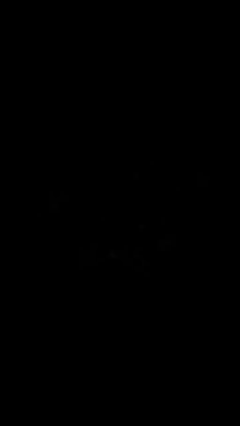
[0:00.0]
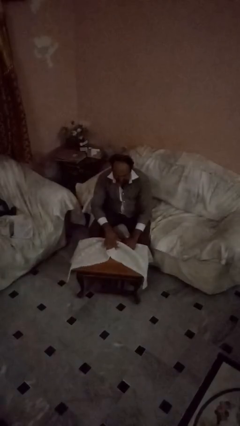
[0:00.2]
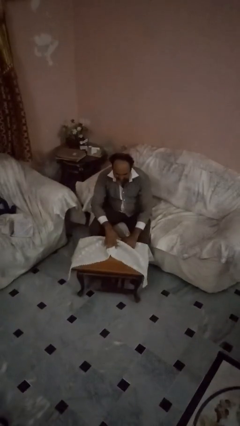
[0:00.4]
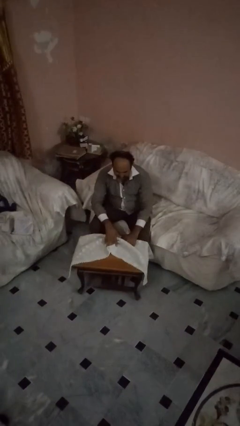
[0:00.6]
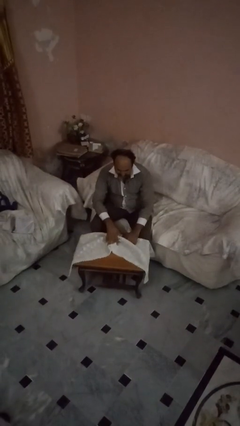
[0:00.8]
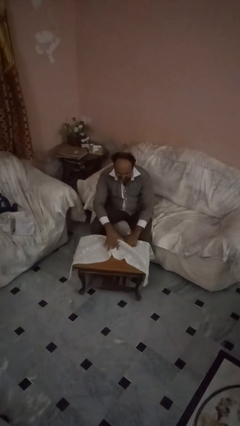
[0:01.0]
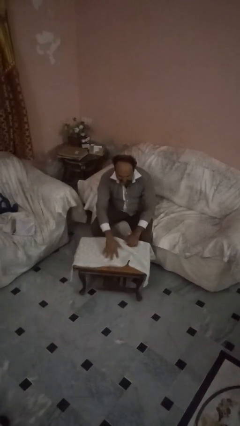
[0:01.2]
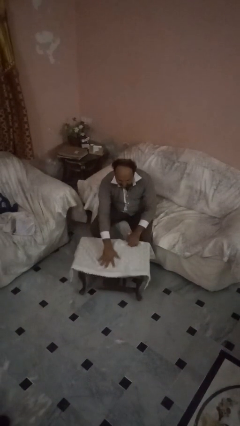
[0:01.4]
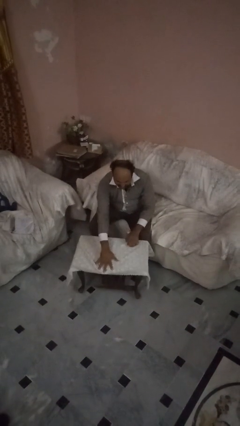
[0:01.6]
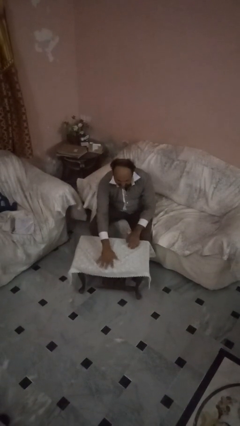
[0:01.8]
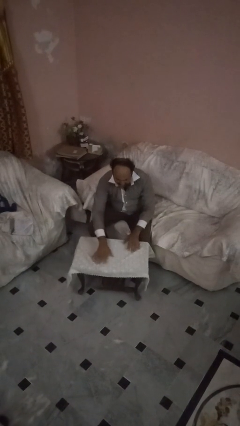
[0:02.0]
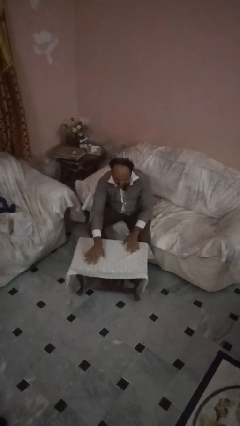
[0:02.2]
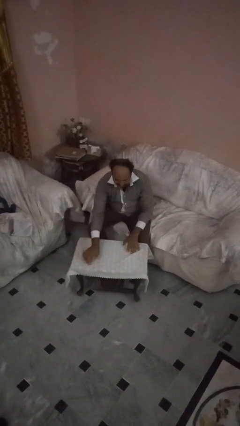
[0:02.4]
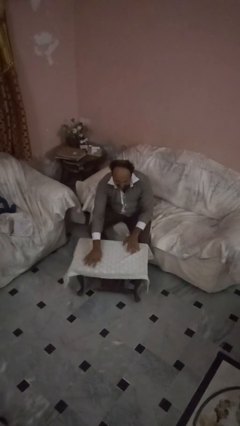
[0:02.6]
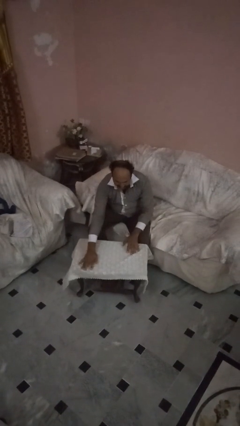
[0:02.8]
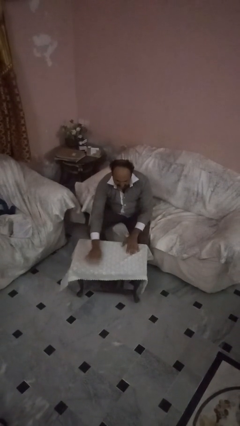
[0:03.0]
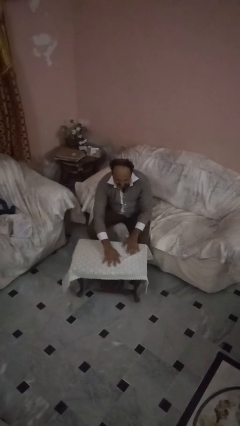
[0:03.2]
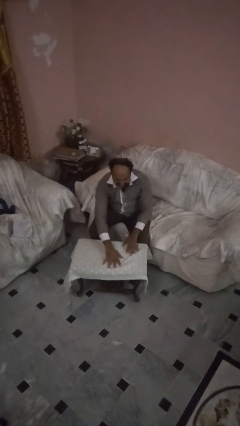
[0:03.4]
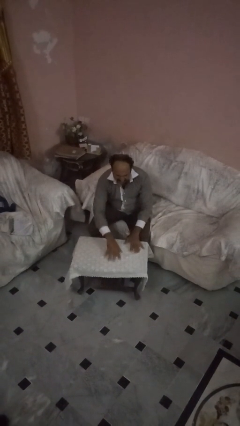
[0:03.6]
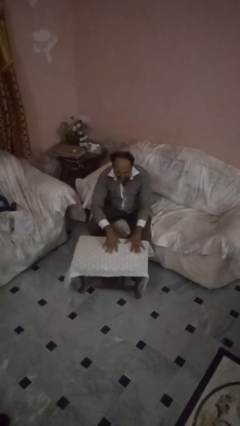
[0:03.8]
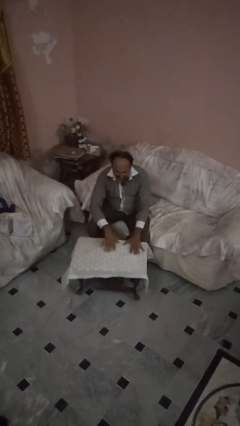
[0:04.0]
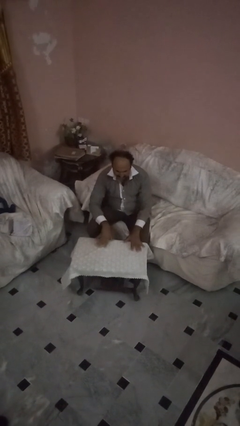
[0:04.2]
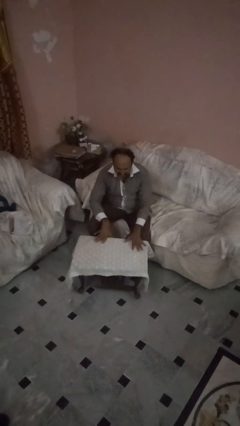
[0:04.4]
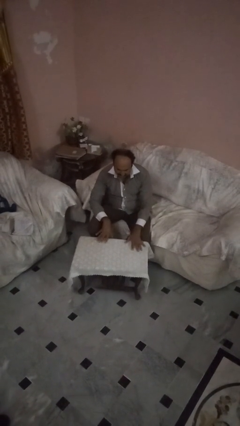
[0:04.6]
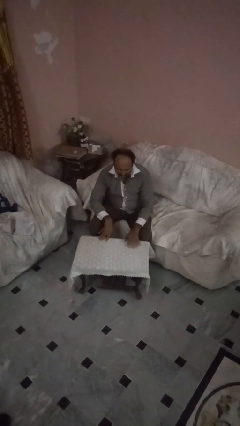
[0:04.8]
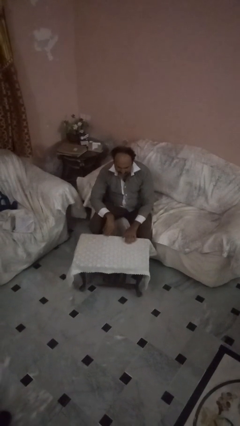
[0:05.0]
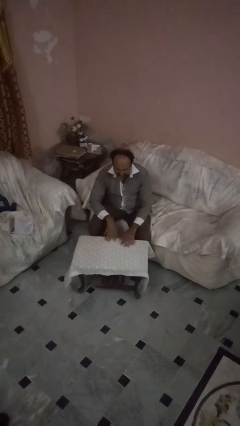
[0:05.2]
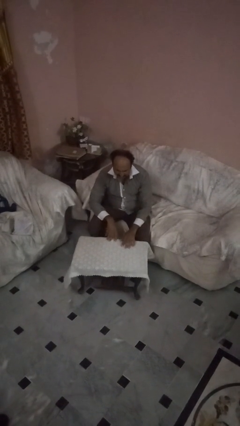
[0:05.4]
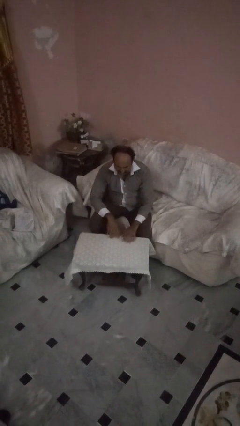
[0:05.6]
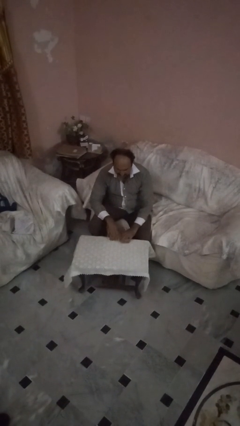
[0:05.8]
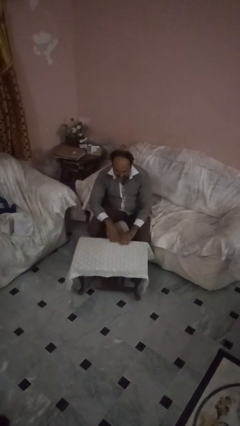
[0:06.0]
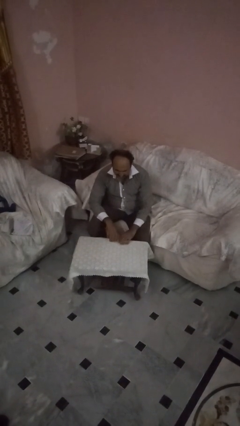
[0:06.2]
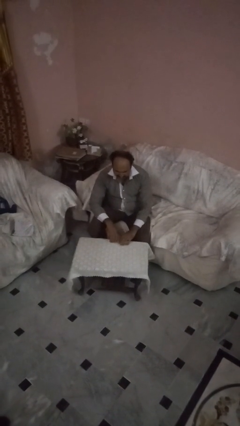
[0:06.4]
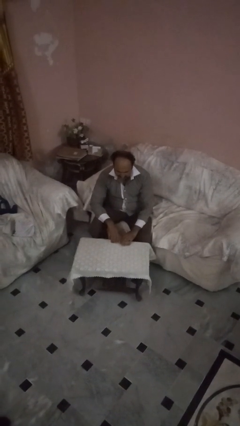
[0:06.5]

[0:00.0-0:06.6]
person spreads tablecloth

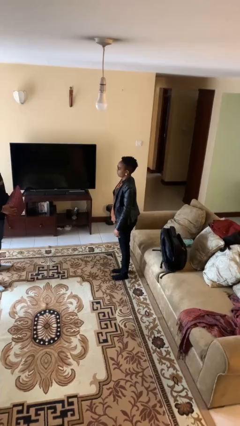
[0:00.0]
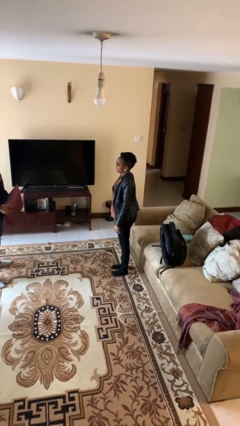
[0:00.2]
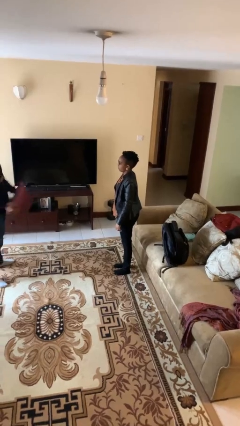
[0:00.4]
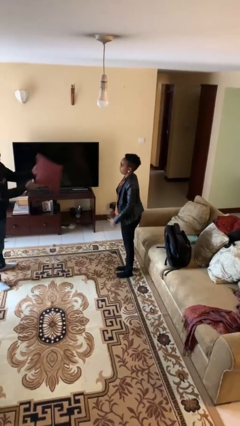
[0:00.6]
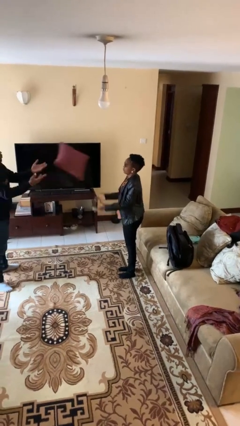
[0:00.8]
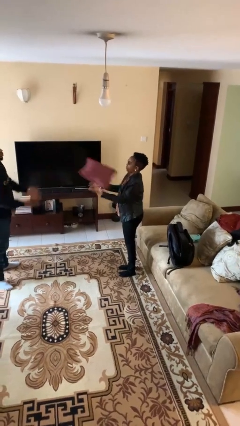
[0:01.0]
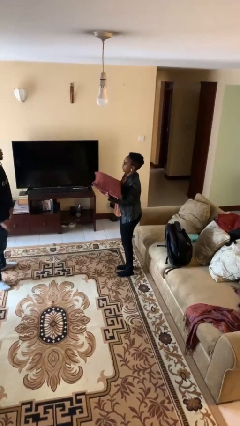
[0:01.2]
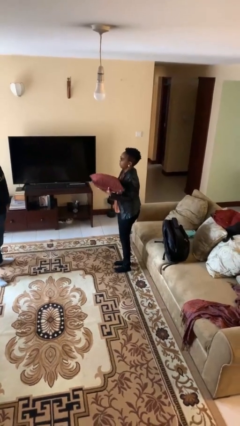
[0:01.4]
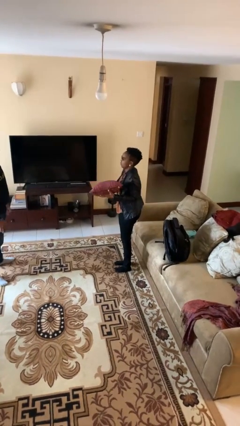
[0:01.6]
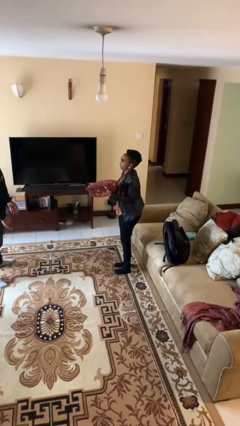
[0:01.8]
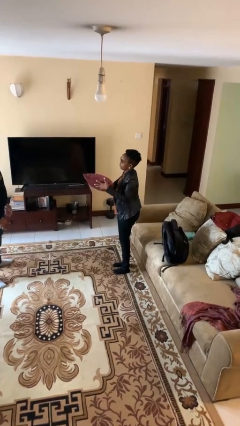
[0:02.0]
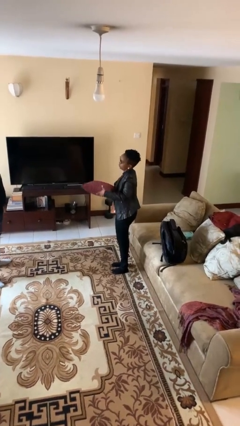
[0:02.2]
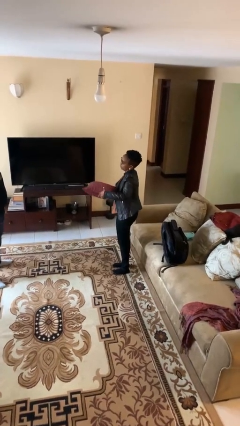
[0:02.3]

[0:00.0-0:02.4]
person catches object from person

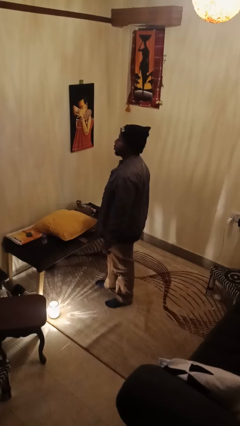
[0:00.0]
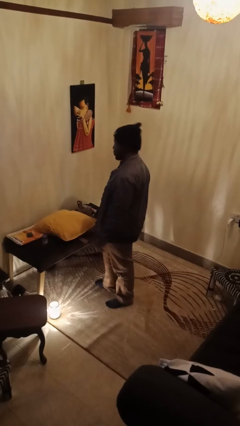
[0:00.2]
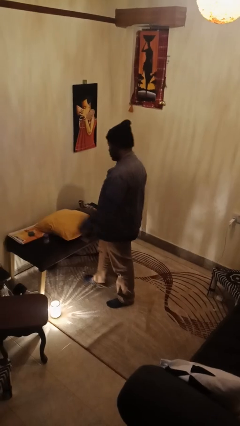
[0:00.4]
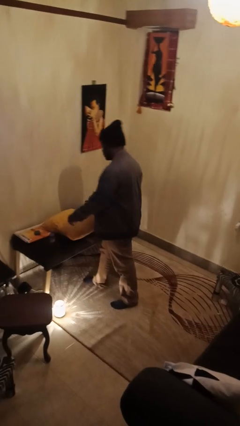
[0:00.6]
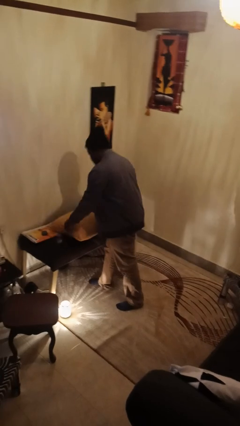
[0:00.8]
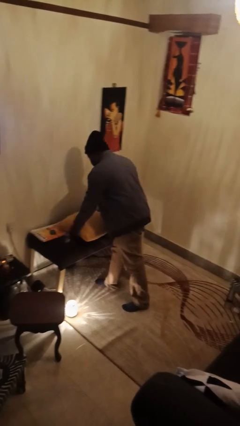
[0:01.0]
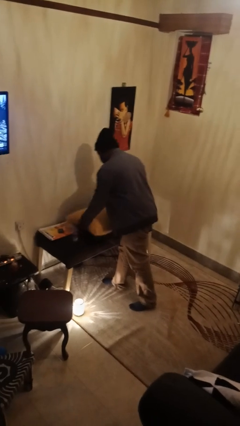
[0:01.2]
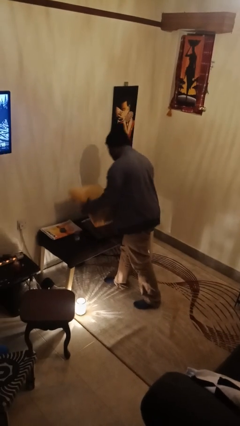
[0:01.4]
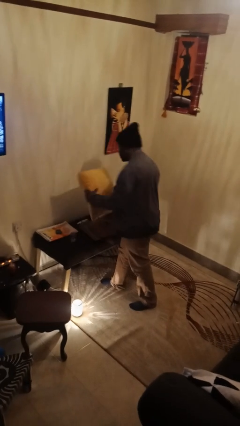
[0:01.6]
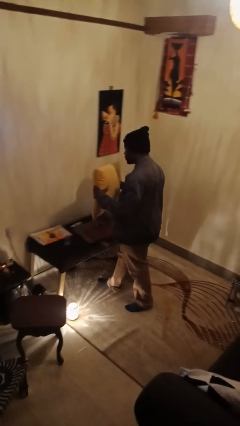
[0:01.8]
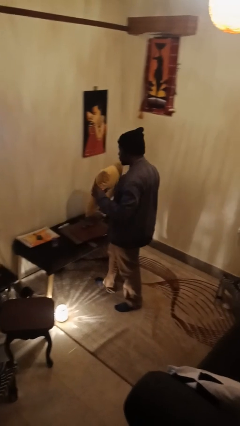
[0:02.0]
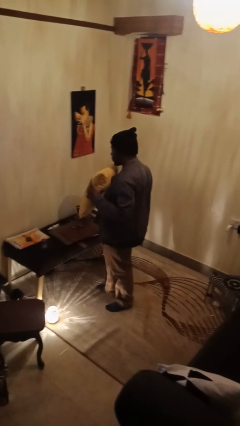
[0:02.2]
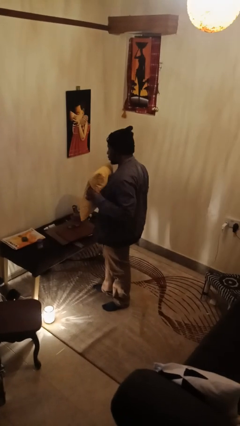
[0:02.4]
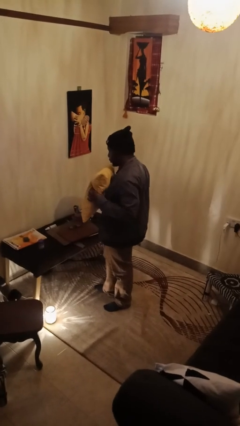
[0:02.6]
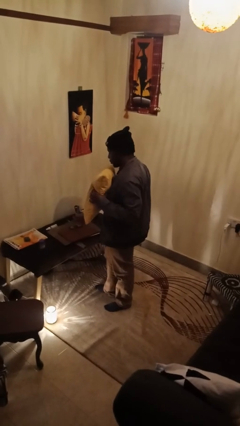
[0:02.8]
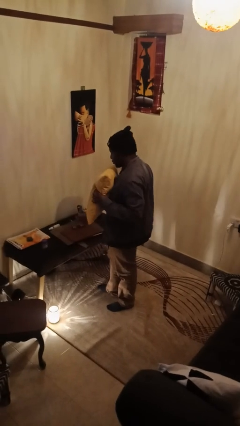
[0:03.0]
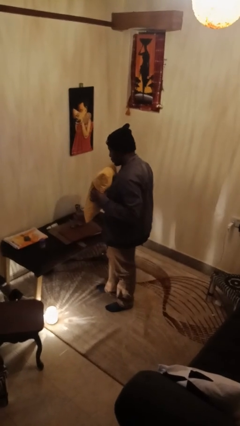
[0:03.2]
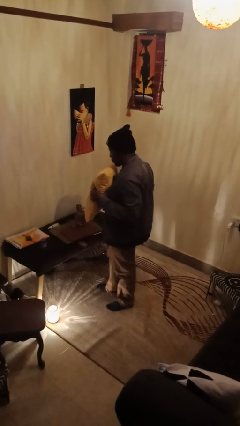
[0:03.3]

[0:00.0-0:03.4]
person picks up object from countertop

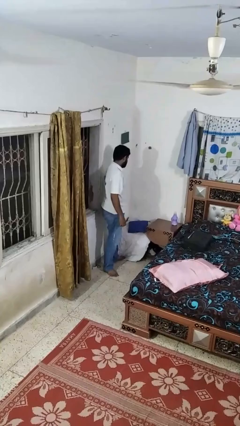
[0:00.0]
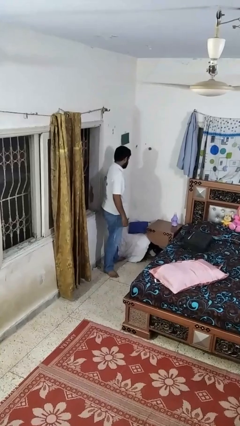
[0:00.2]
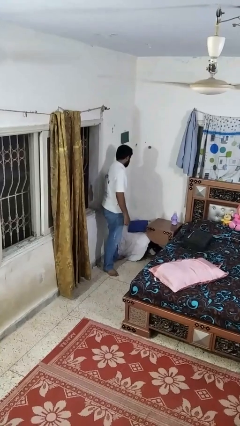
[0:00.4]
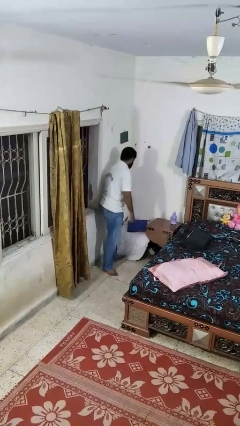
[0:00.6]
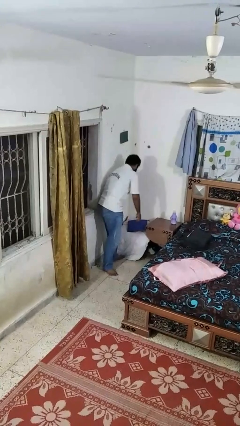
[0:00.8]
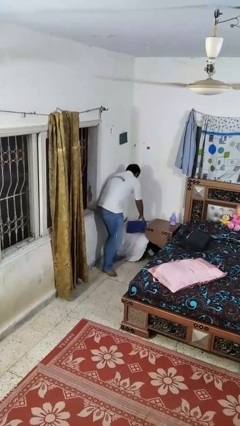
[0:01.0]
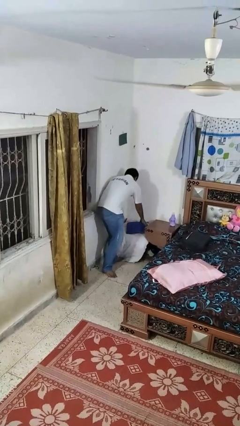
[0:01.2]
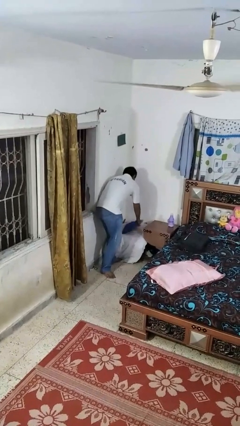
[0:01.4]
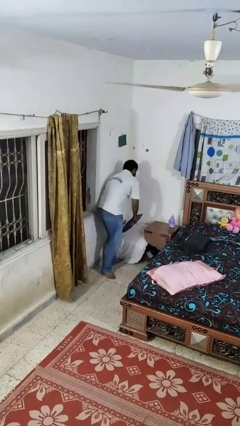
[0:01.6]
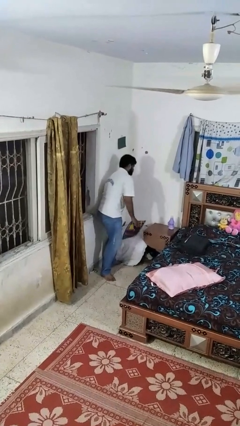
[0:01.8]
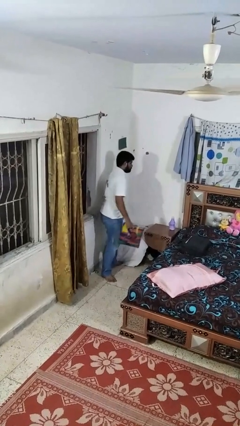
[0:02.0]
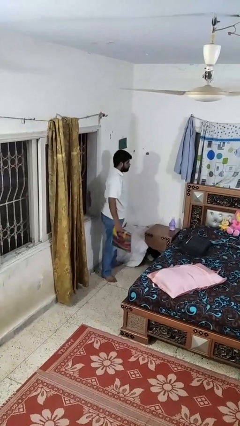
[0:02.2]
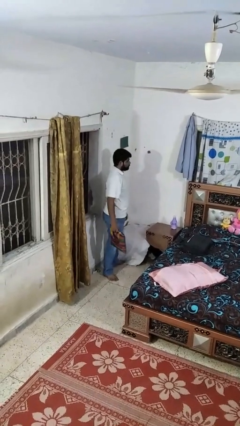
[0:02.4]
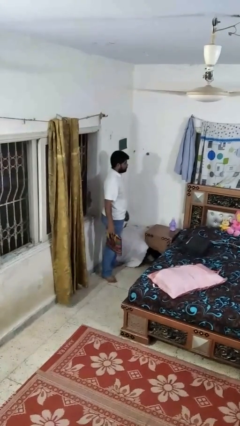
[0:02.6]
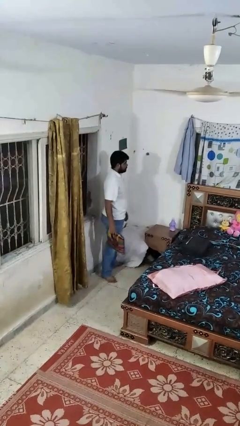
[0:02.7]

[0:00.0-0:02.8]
person picks up object from couch

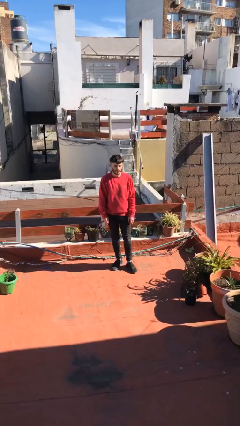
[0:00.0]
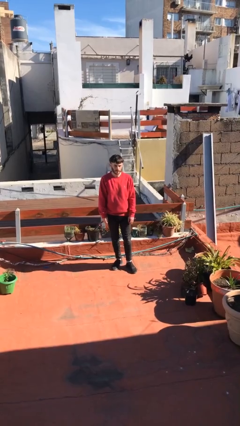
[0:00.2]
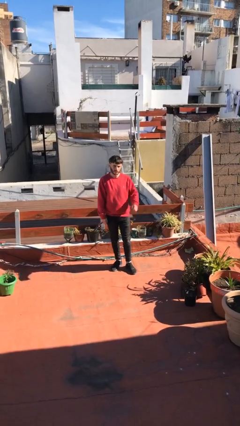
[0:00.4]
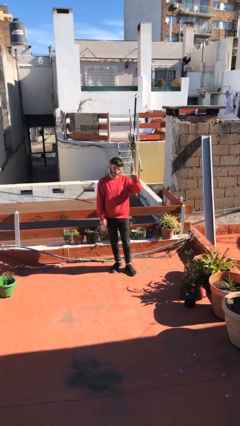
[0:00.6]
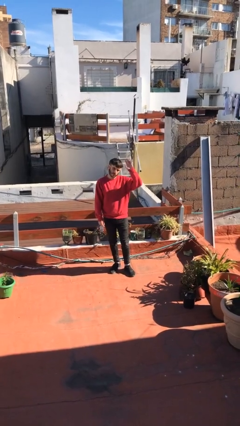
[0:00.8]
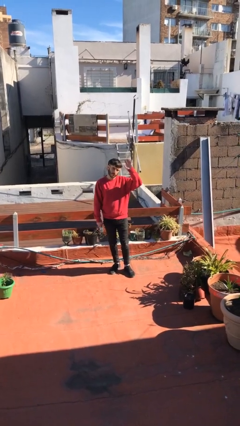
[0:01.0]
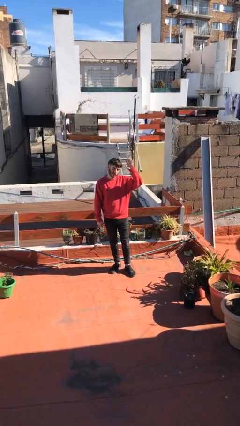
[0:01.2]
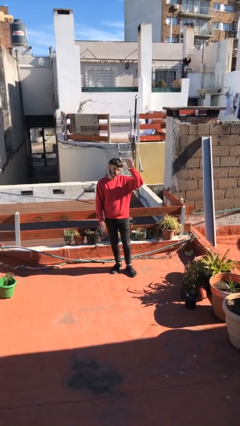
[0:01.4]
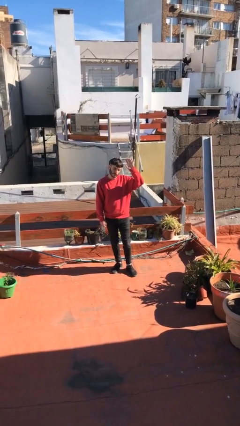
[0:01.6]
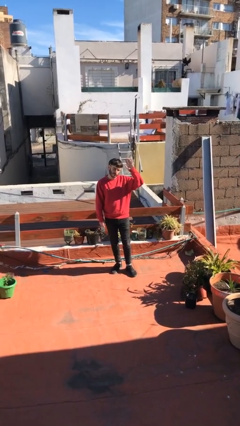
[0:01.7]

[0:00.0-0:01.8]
person gestures raise hand

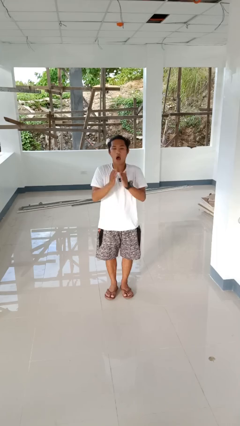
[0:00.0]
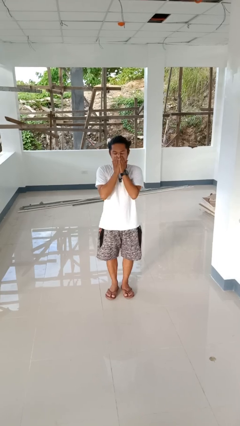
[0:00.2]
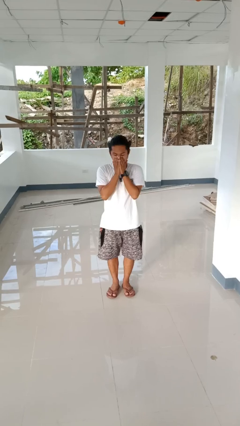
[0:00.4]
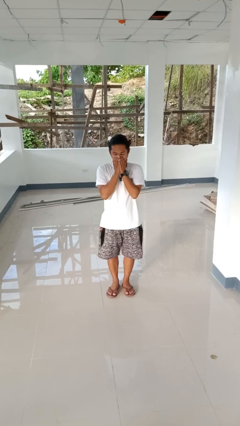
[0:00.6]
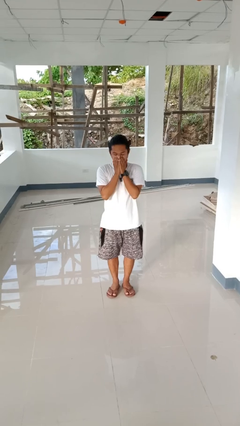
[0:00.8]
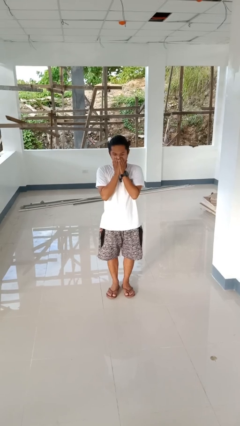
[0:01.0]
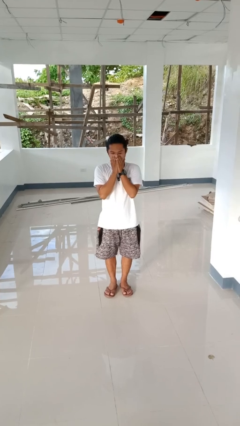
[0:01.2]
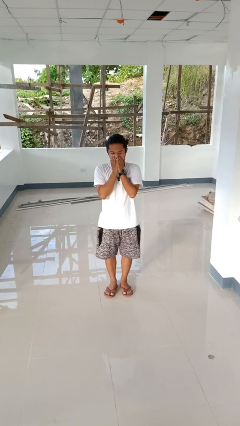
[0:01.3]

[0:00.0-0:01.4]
person sneezes into hand
